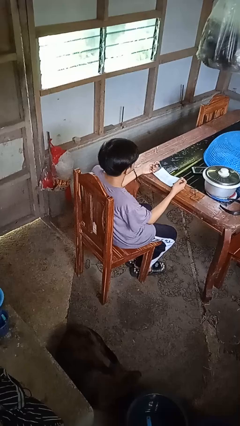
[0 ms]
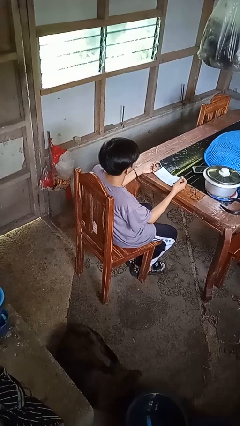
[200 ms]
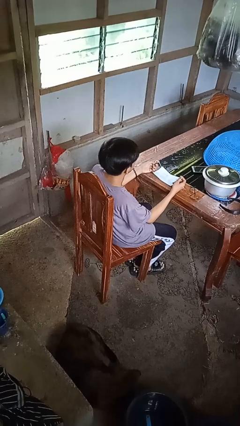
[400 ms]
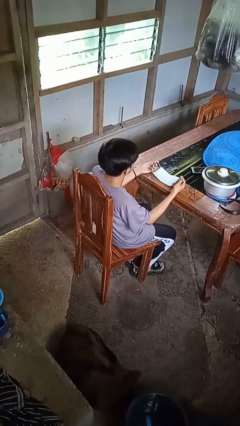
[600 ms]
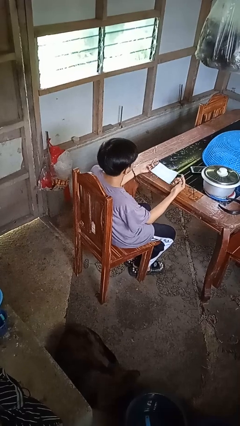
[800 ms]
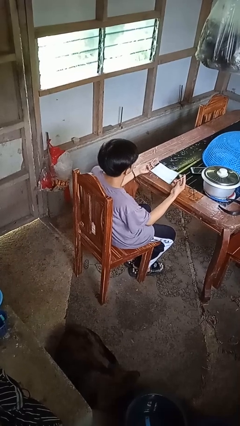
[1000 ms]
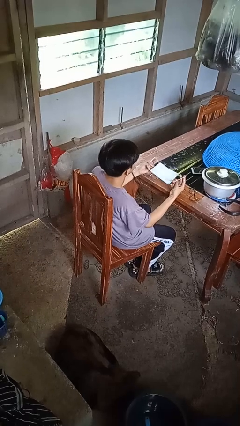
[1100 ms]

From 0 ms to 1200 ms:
person puts on facemask

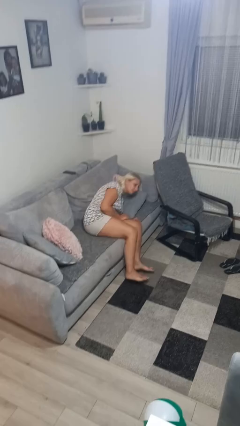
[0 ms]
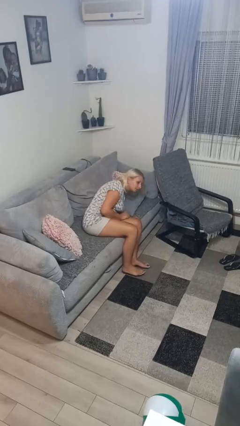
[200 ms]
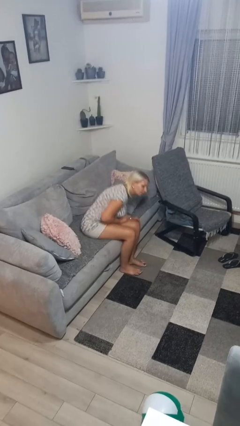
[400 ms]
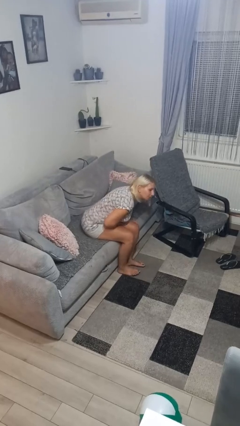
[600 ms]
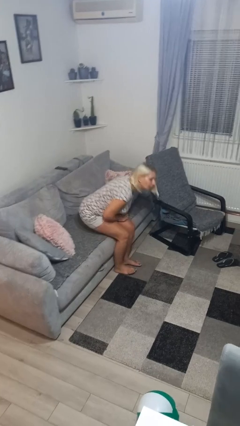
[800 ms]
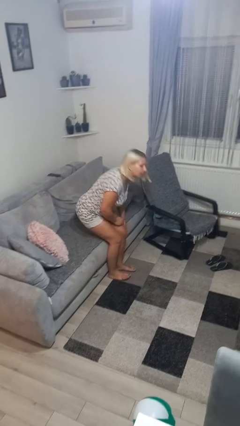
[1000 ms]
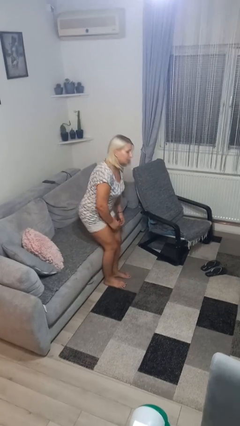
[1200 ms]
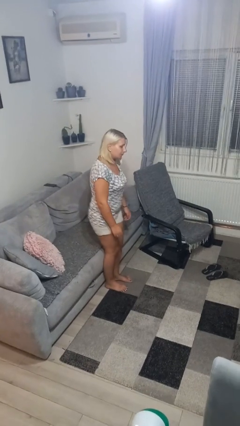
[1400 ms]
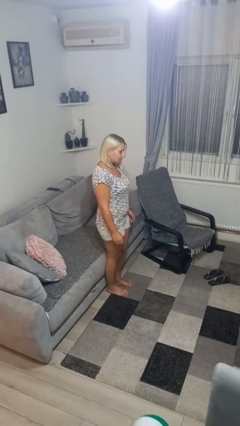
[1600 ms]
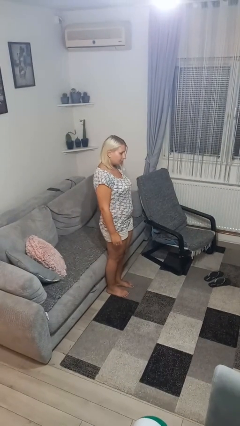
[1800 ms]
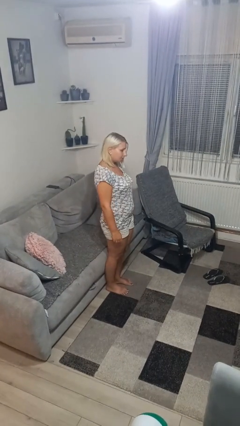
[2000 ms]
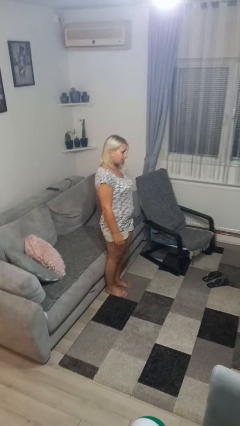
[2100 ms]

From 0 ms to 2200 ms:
person stands up

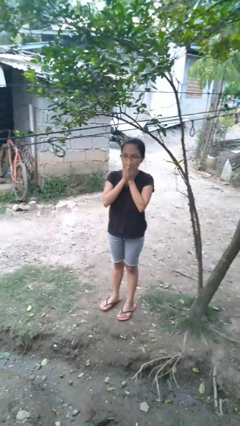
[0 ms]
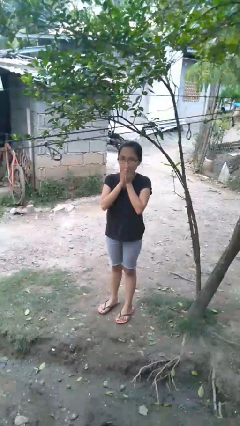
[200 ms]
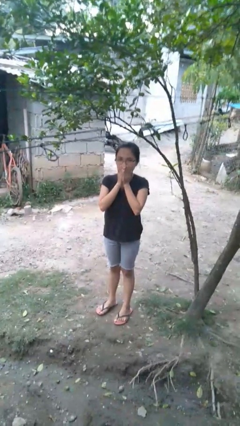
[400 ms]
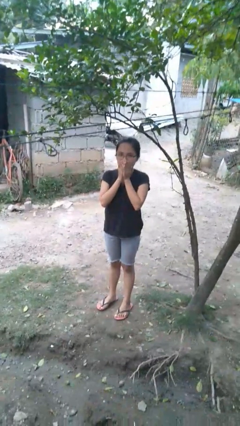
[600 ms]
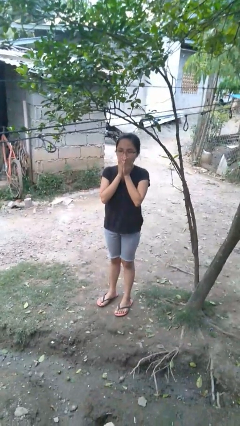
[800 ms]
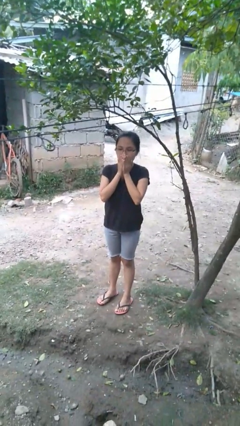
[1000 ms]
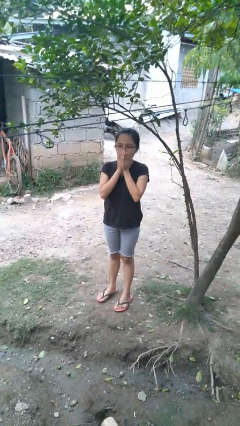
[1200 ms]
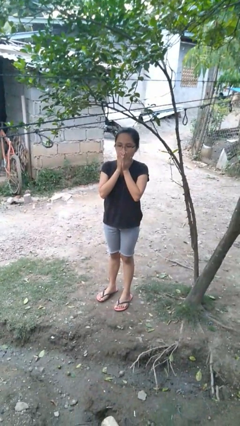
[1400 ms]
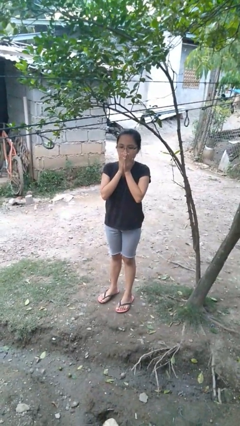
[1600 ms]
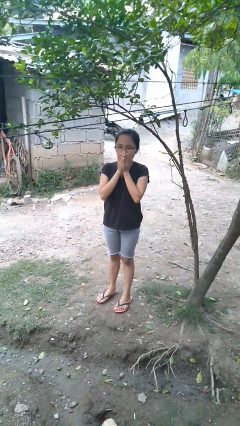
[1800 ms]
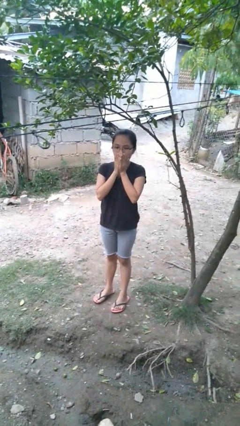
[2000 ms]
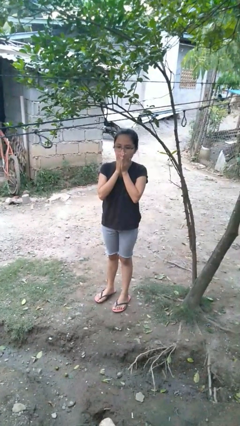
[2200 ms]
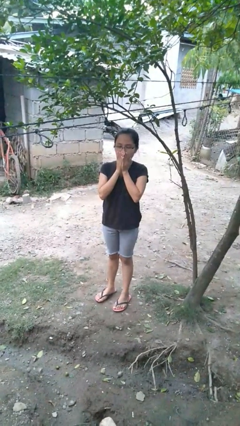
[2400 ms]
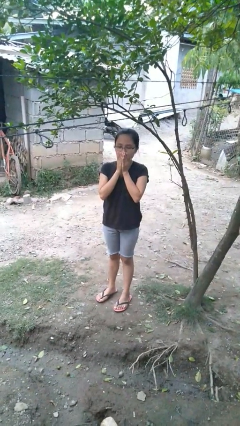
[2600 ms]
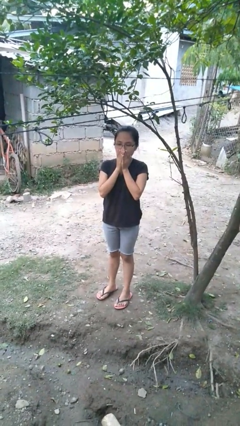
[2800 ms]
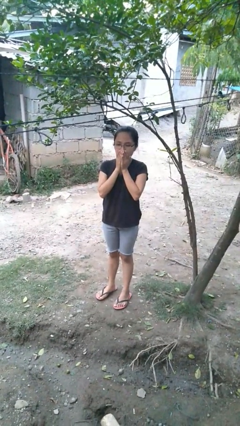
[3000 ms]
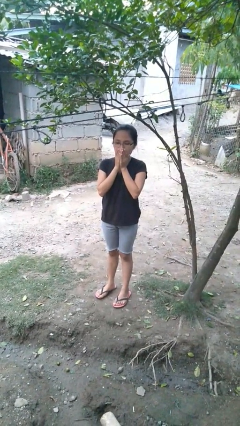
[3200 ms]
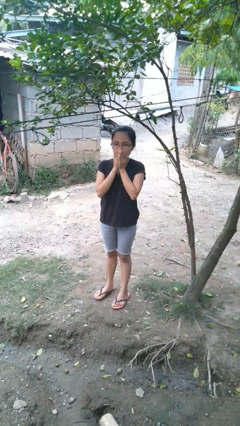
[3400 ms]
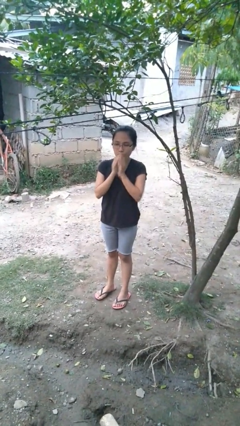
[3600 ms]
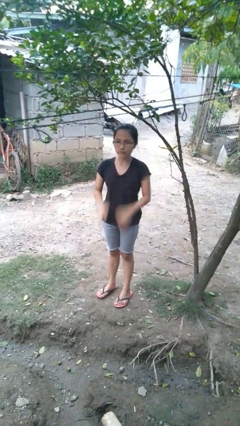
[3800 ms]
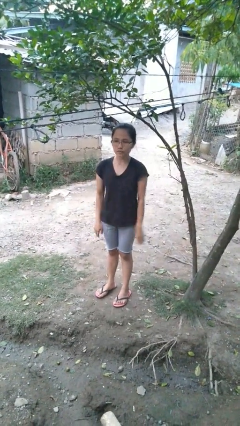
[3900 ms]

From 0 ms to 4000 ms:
person blows into hands

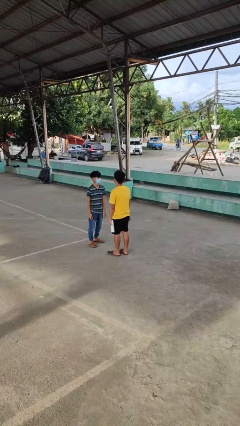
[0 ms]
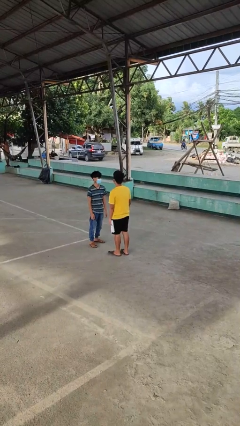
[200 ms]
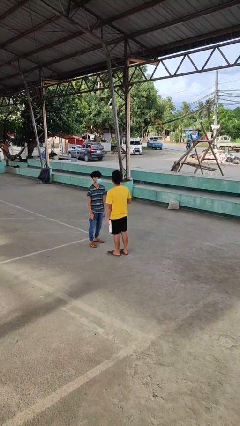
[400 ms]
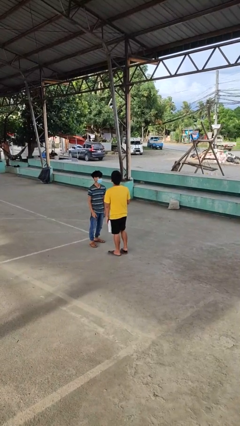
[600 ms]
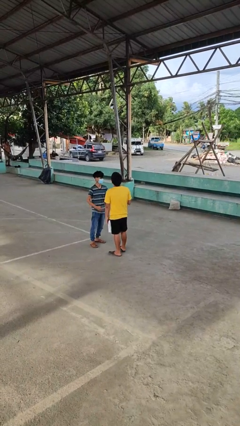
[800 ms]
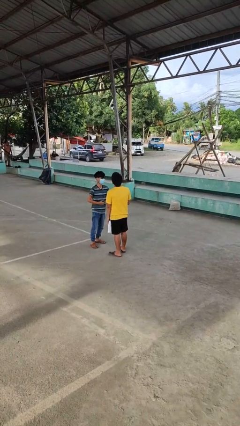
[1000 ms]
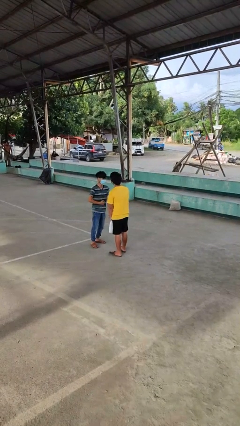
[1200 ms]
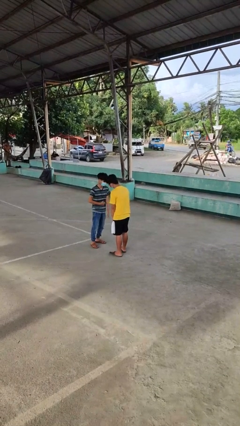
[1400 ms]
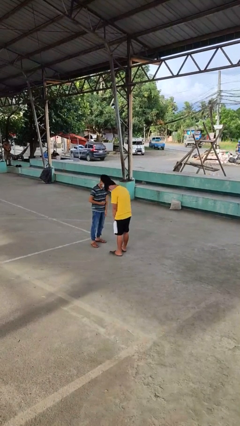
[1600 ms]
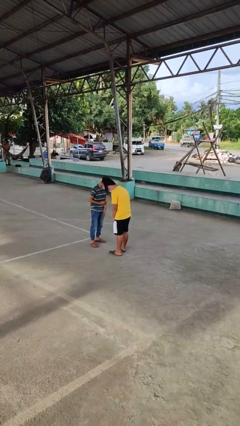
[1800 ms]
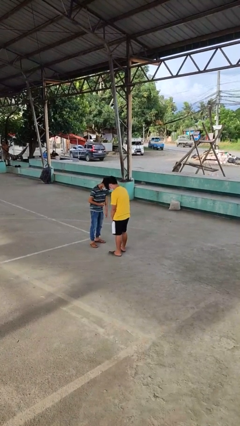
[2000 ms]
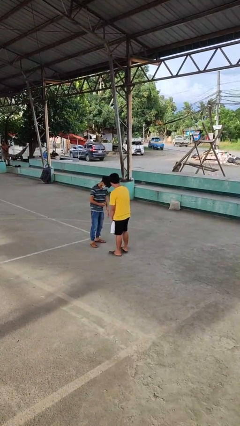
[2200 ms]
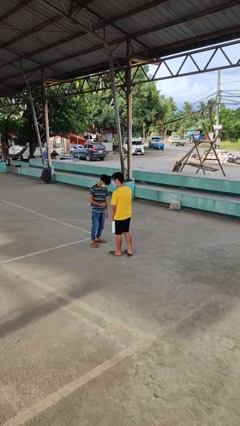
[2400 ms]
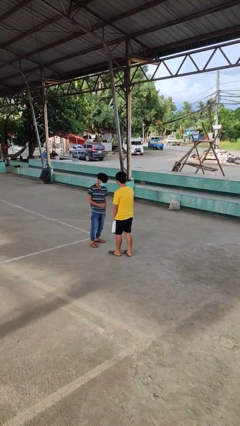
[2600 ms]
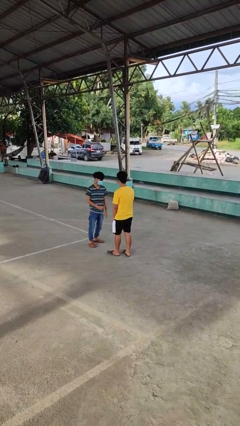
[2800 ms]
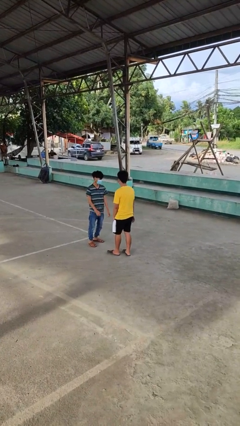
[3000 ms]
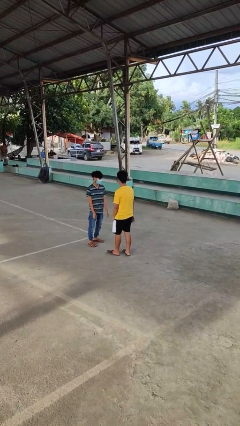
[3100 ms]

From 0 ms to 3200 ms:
person laughs with person

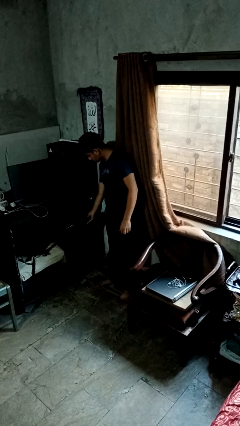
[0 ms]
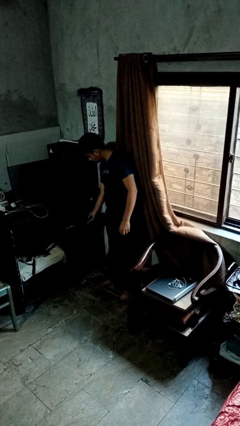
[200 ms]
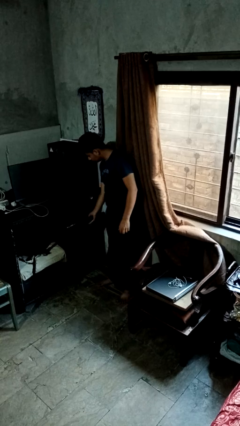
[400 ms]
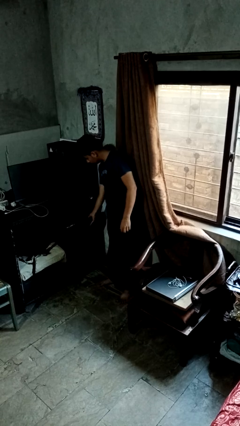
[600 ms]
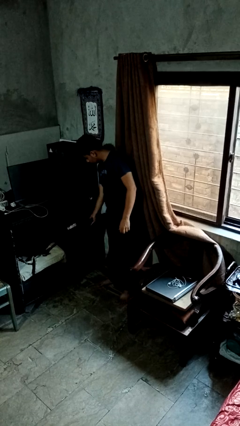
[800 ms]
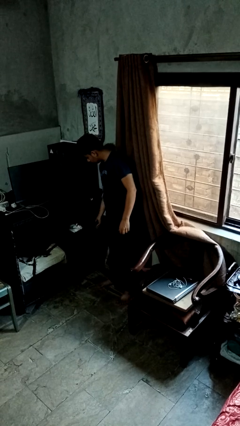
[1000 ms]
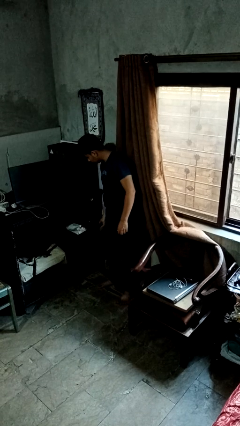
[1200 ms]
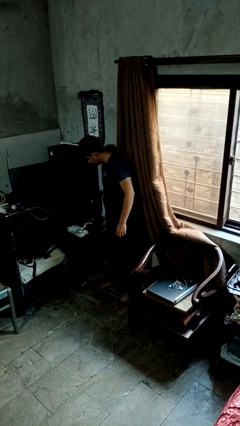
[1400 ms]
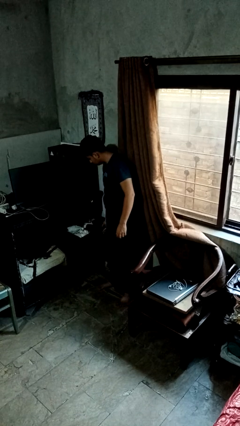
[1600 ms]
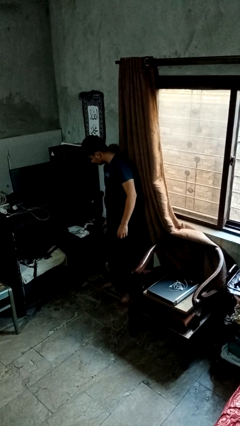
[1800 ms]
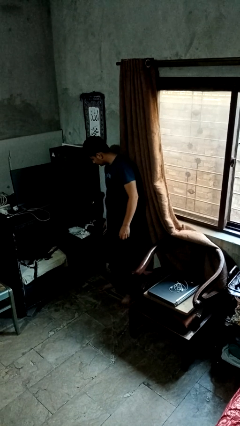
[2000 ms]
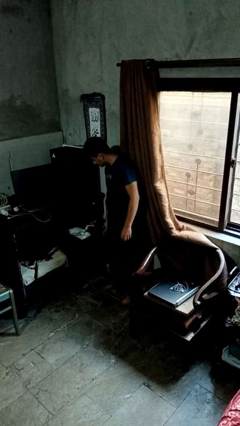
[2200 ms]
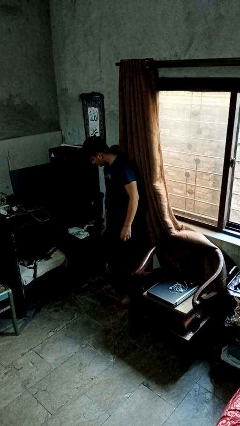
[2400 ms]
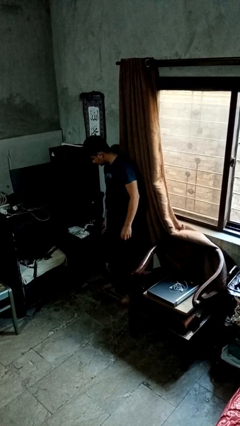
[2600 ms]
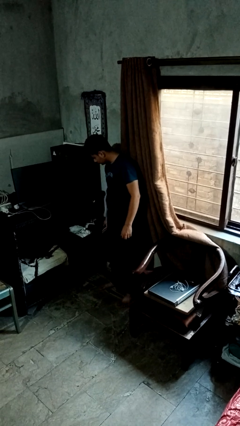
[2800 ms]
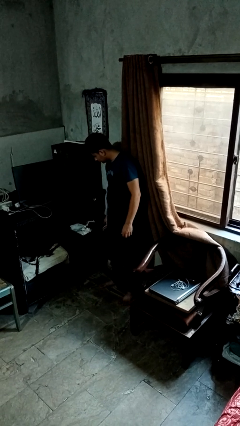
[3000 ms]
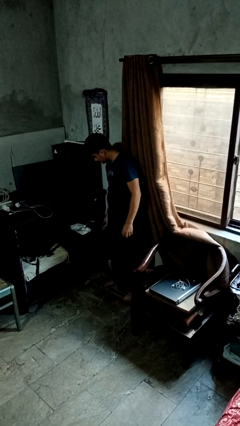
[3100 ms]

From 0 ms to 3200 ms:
person opens dresser drawer

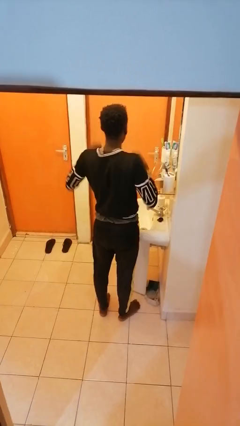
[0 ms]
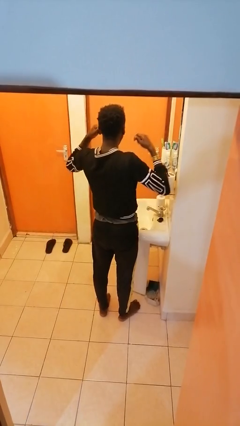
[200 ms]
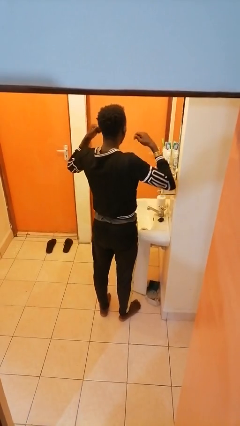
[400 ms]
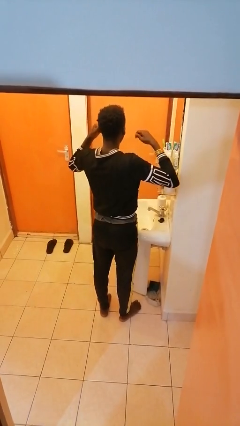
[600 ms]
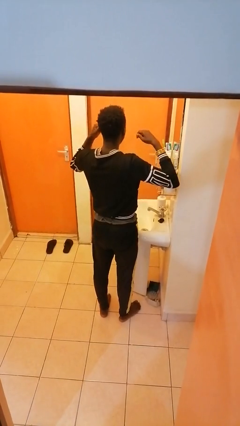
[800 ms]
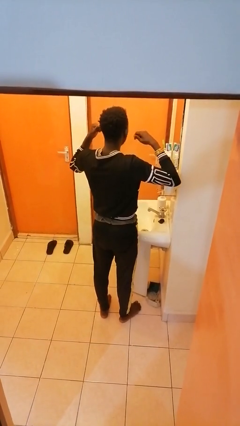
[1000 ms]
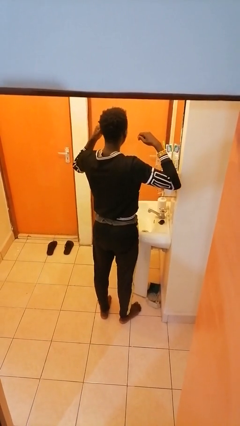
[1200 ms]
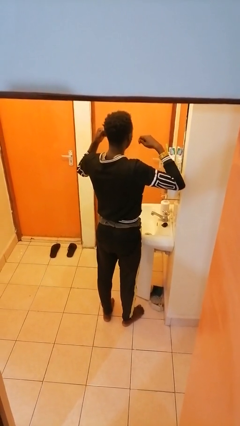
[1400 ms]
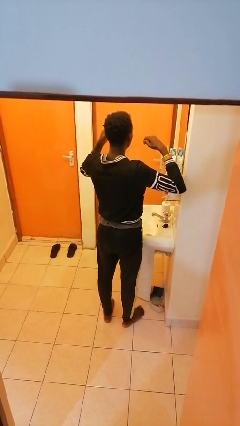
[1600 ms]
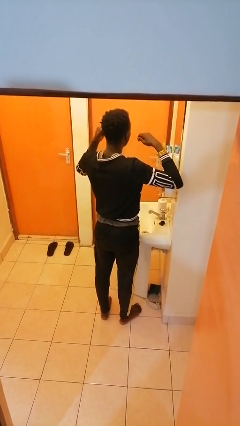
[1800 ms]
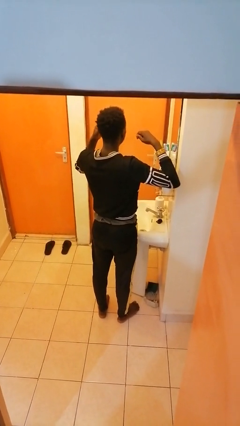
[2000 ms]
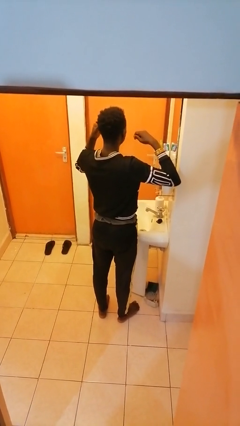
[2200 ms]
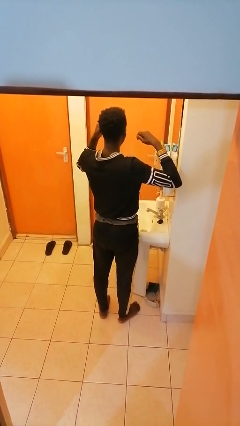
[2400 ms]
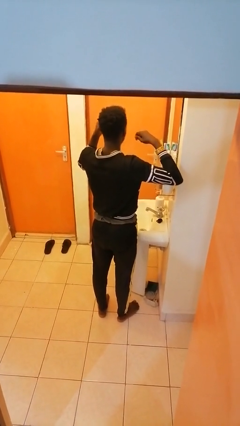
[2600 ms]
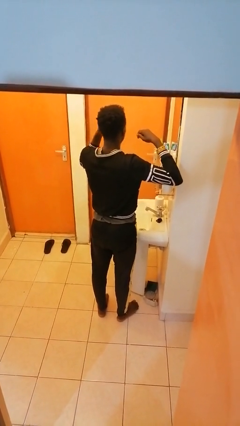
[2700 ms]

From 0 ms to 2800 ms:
person flosses

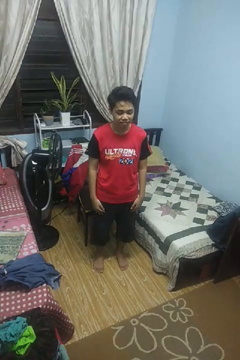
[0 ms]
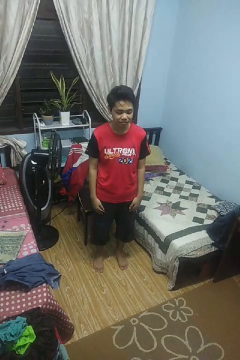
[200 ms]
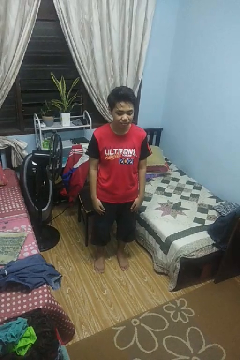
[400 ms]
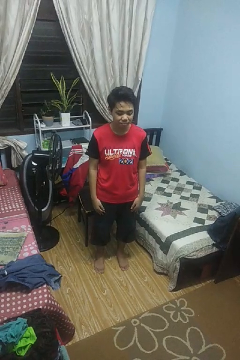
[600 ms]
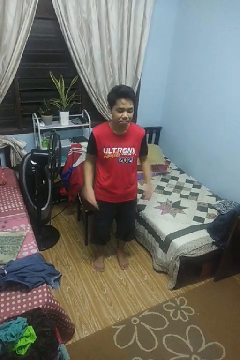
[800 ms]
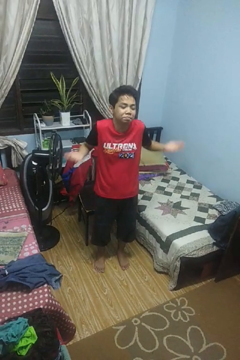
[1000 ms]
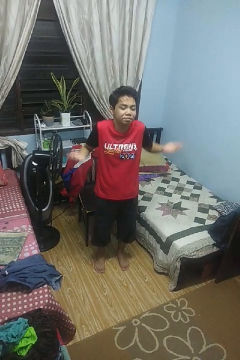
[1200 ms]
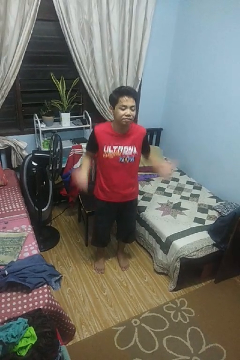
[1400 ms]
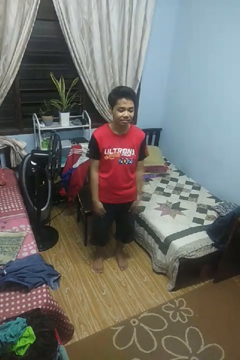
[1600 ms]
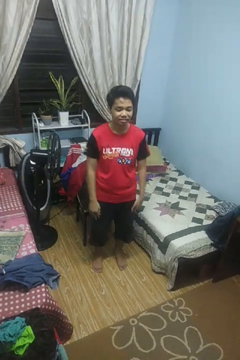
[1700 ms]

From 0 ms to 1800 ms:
person shrugs
